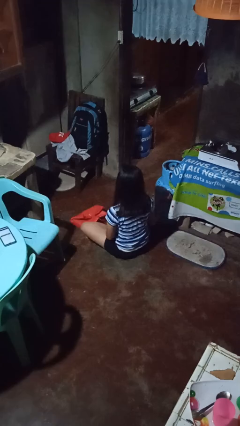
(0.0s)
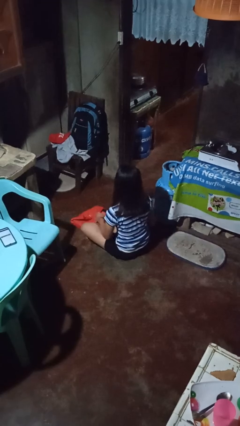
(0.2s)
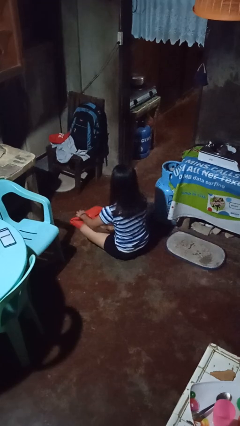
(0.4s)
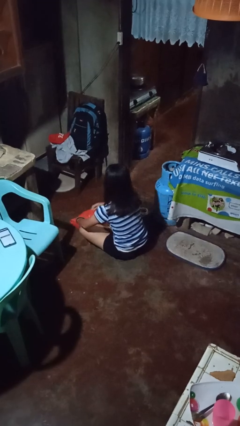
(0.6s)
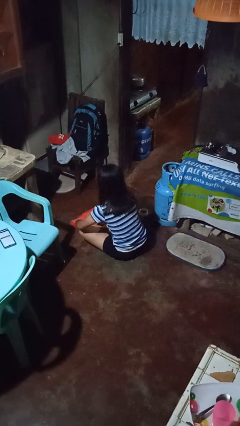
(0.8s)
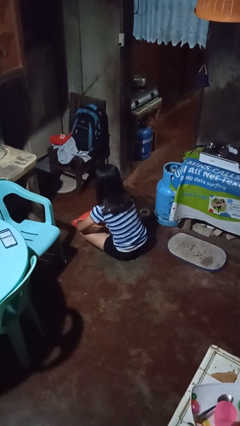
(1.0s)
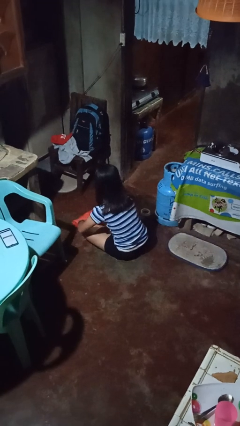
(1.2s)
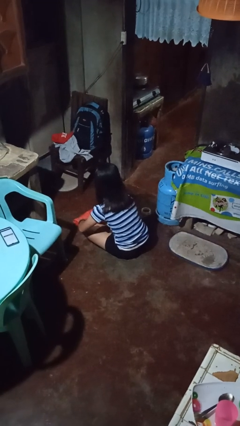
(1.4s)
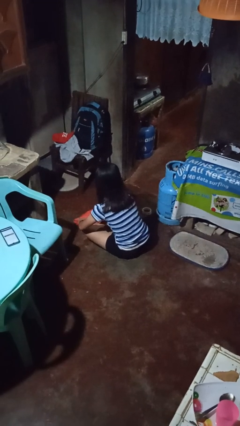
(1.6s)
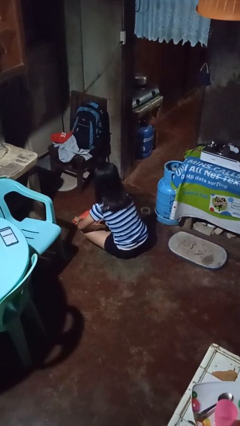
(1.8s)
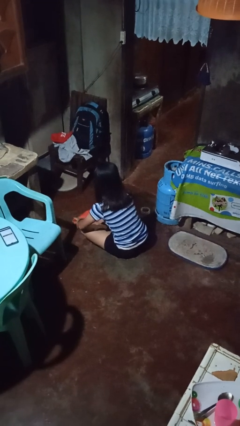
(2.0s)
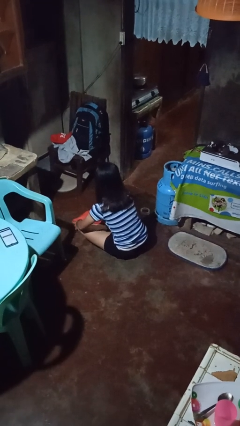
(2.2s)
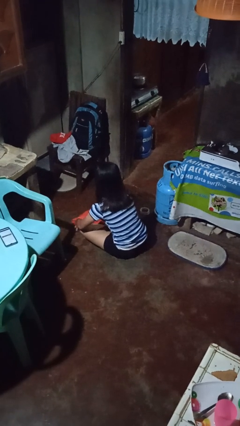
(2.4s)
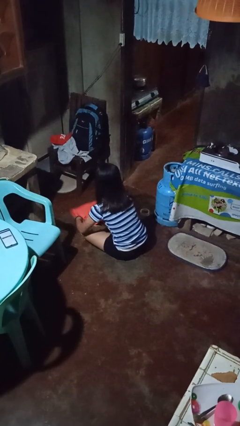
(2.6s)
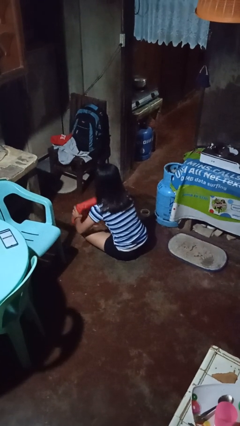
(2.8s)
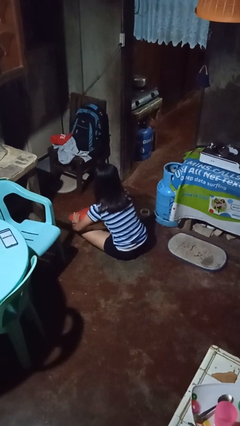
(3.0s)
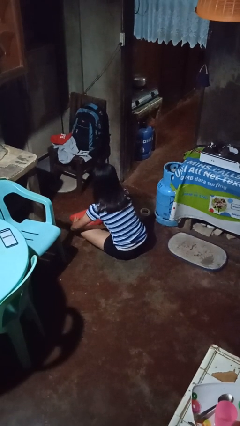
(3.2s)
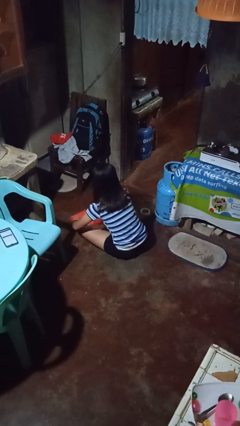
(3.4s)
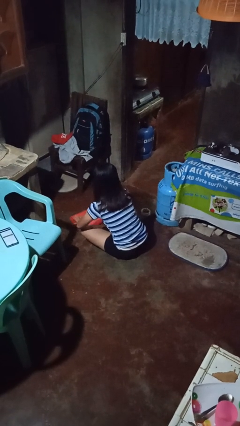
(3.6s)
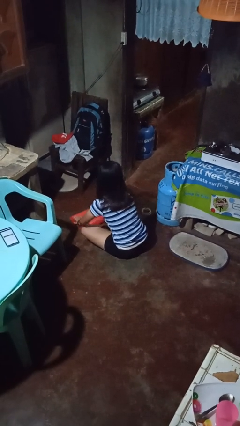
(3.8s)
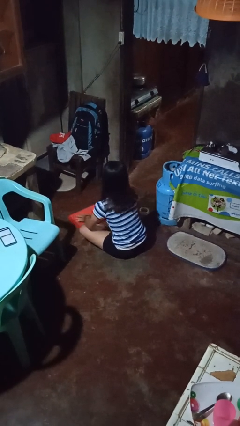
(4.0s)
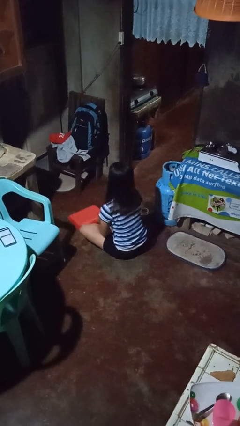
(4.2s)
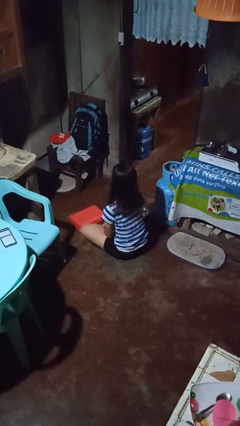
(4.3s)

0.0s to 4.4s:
person wraps box

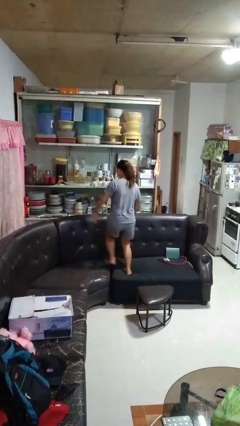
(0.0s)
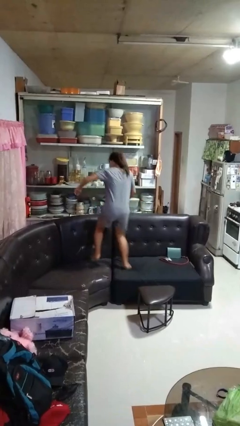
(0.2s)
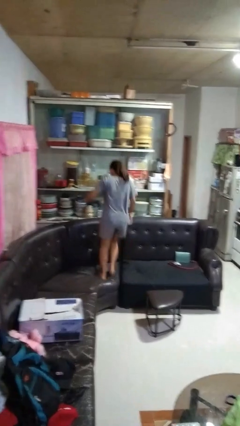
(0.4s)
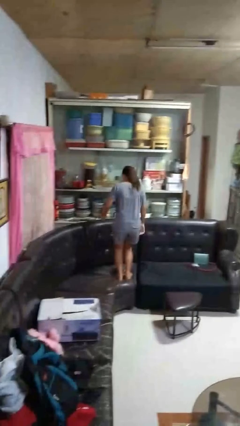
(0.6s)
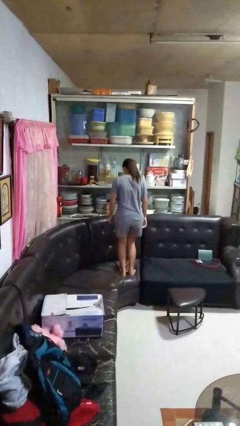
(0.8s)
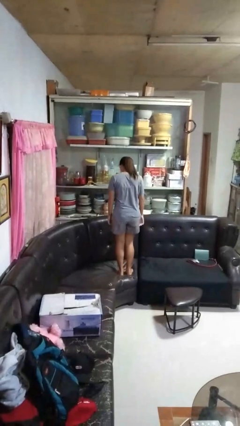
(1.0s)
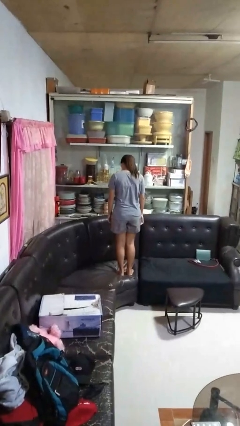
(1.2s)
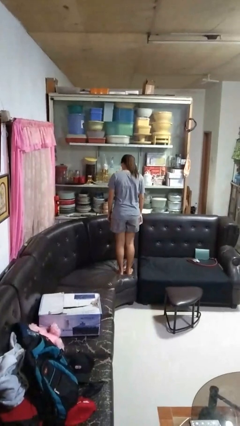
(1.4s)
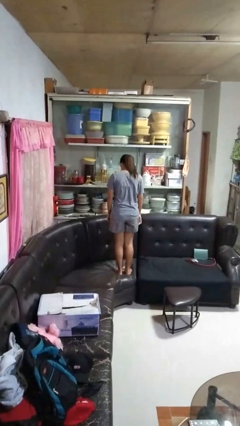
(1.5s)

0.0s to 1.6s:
person jumps on couch

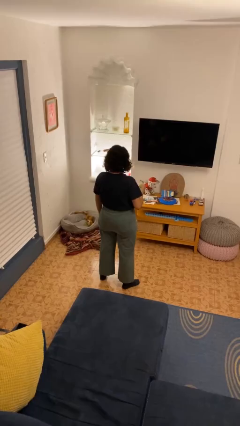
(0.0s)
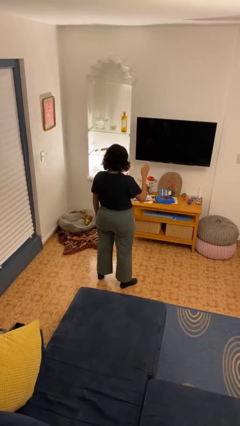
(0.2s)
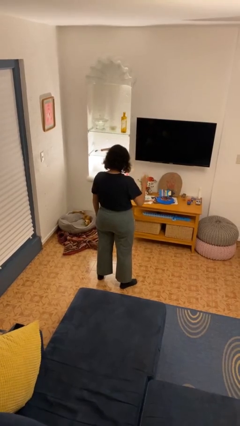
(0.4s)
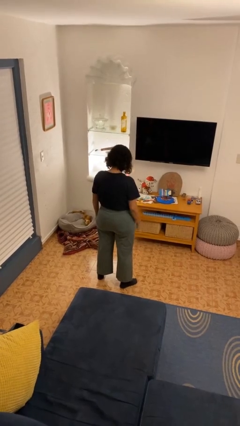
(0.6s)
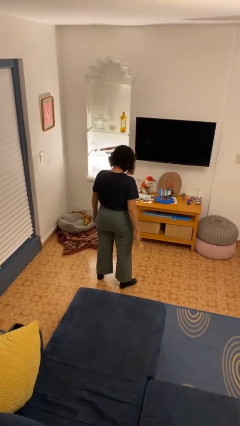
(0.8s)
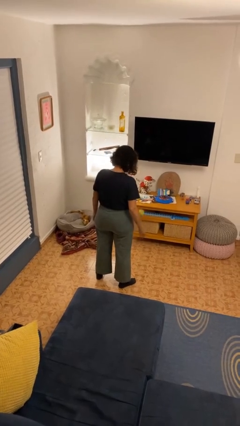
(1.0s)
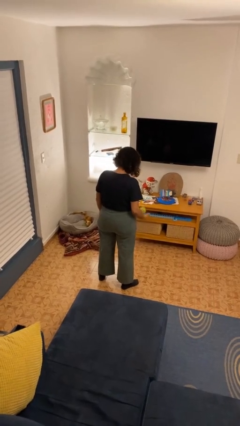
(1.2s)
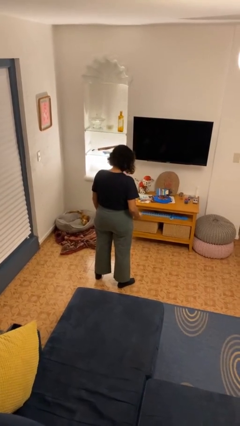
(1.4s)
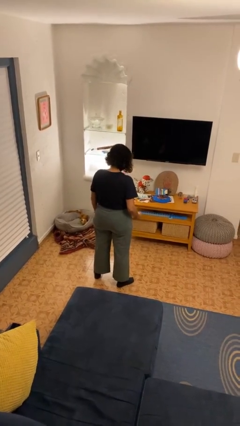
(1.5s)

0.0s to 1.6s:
person bounces ball on floor

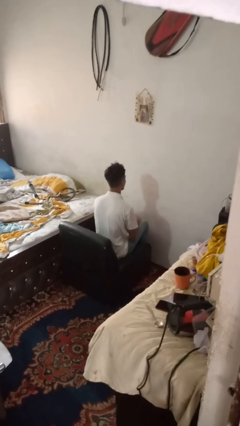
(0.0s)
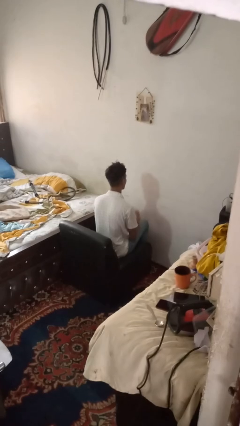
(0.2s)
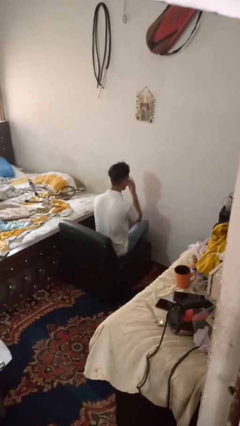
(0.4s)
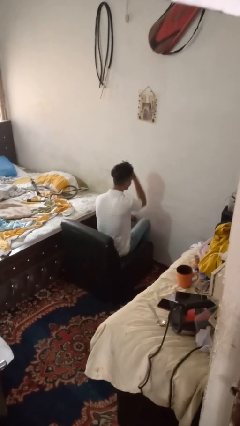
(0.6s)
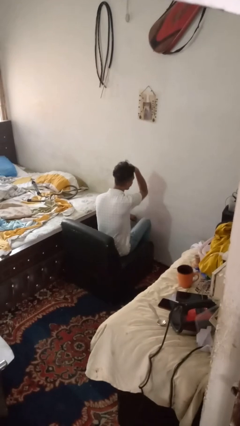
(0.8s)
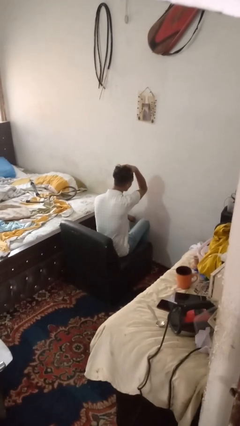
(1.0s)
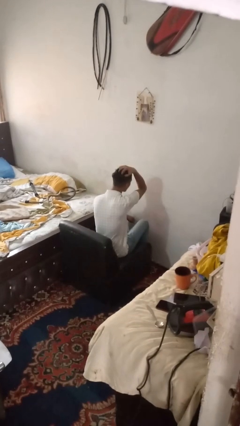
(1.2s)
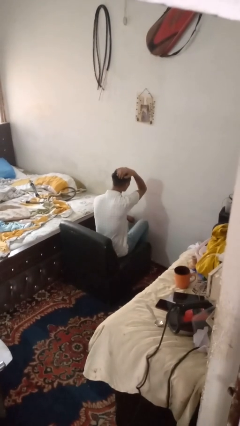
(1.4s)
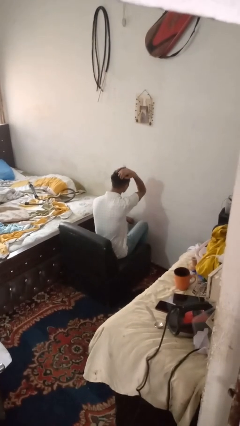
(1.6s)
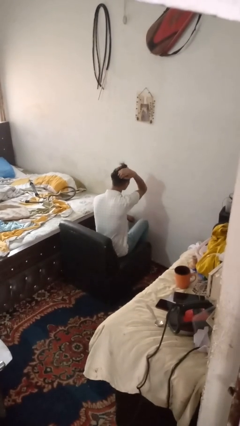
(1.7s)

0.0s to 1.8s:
person strokes hair

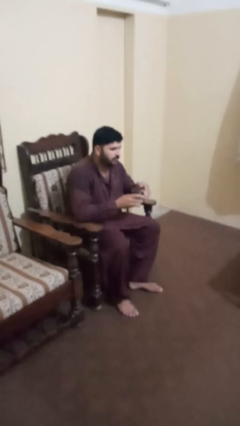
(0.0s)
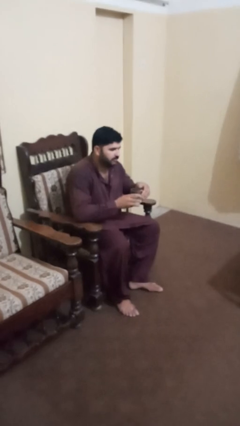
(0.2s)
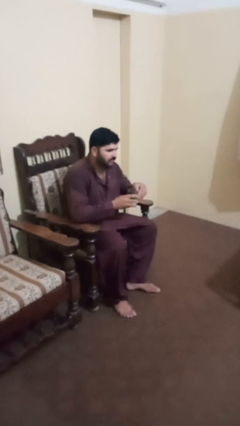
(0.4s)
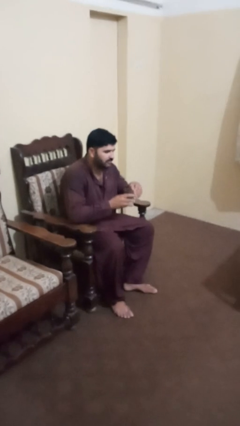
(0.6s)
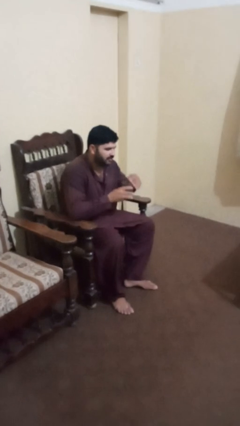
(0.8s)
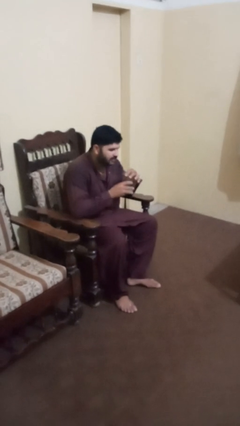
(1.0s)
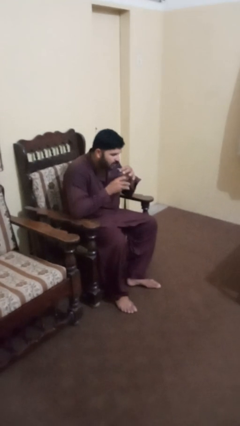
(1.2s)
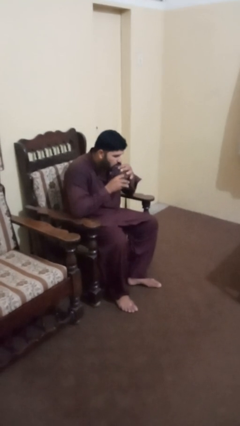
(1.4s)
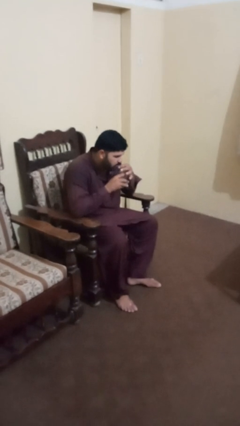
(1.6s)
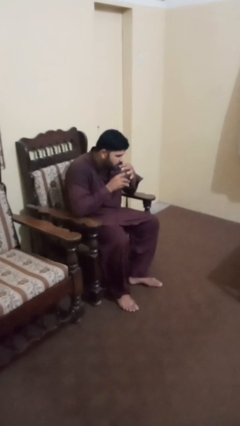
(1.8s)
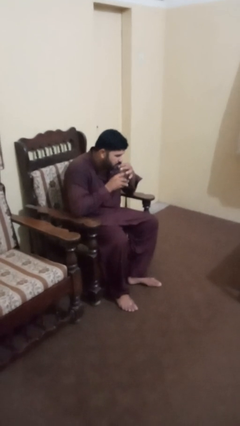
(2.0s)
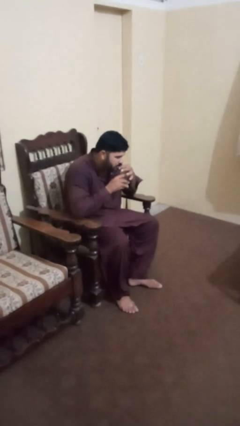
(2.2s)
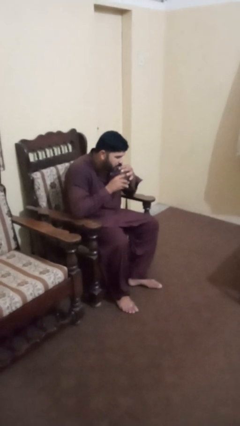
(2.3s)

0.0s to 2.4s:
person drinks from straw

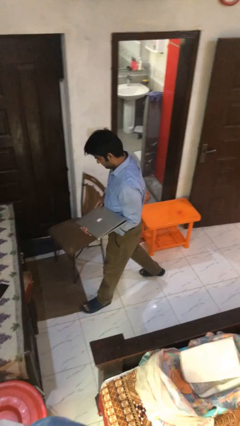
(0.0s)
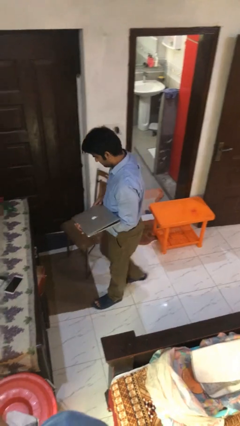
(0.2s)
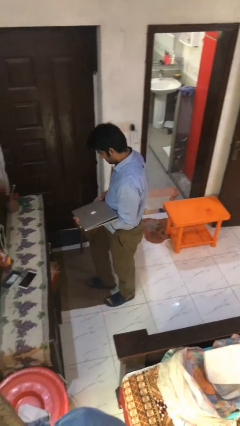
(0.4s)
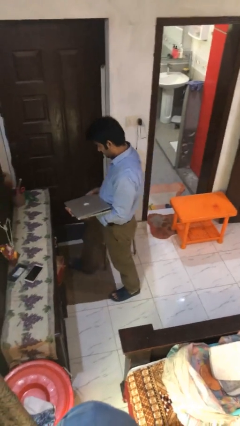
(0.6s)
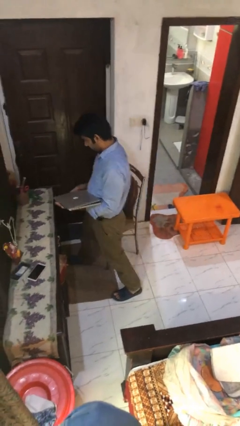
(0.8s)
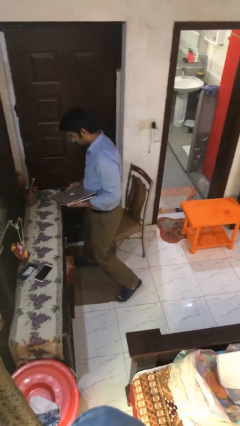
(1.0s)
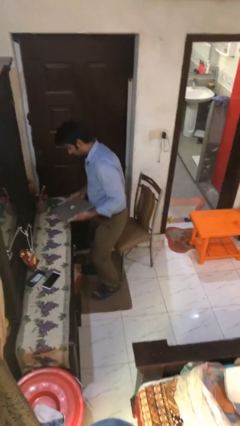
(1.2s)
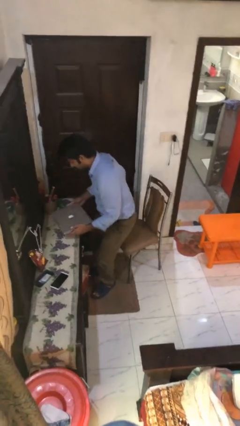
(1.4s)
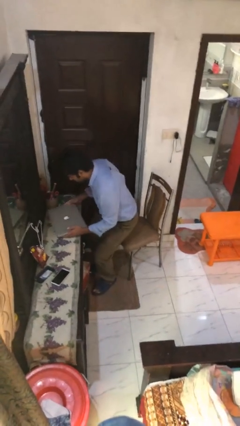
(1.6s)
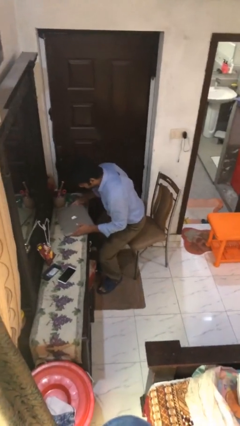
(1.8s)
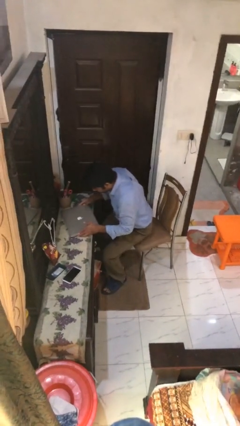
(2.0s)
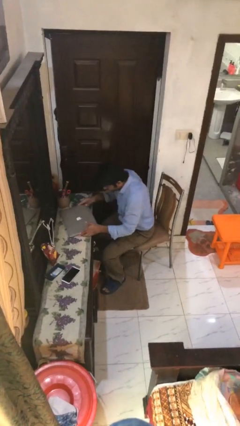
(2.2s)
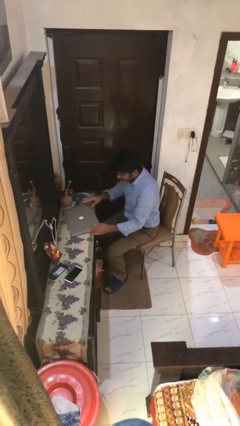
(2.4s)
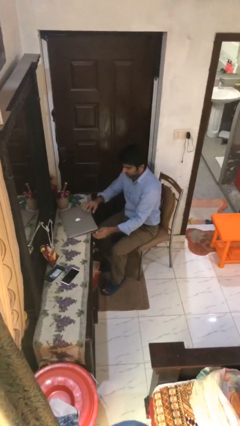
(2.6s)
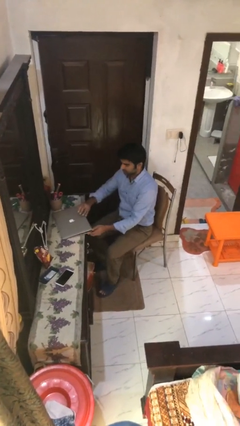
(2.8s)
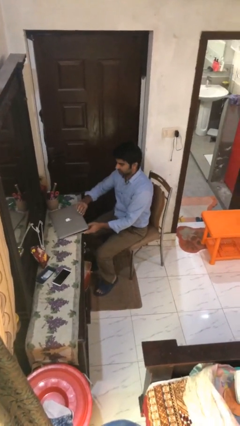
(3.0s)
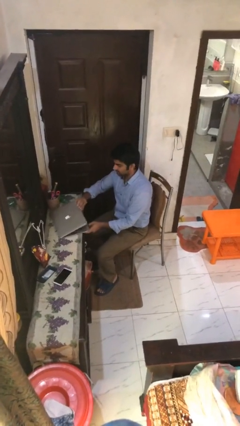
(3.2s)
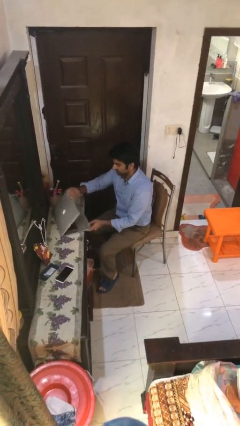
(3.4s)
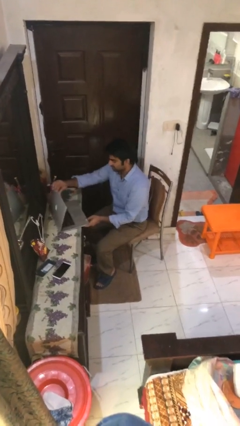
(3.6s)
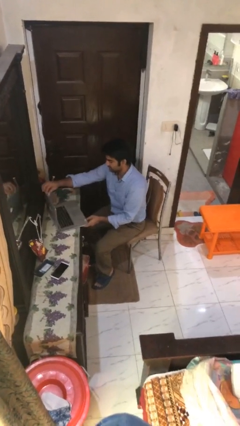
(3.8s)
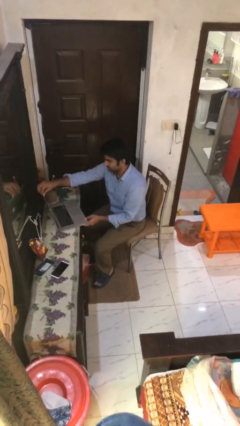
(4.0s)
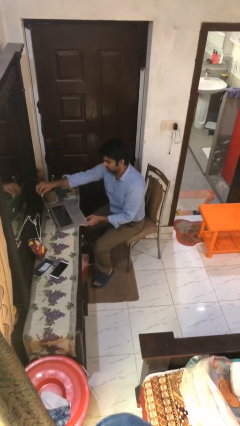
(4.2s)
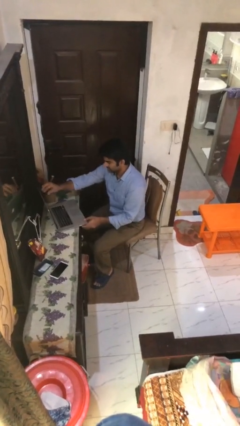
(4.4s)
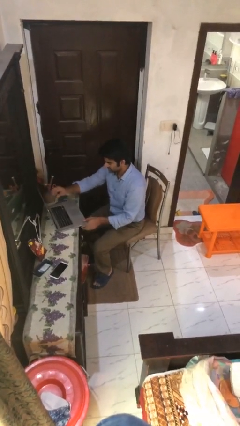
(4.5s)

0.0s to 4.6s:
person sits down

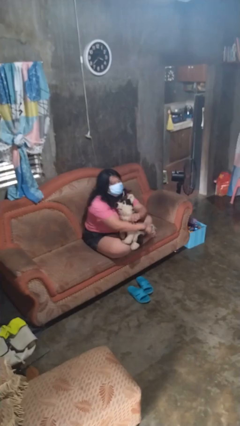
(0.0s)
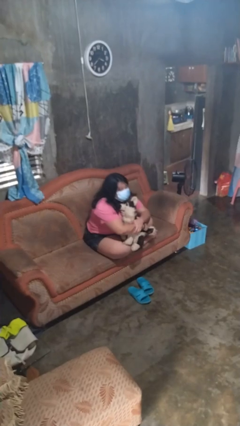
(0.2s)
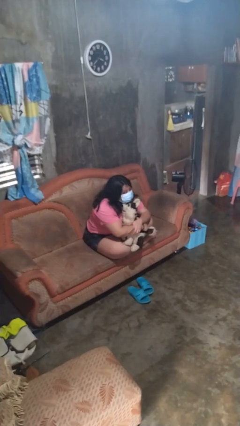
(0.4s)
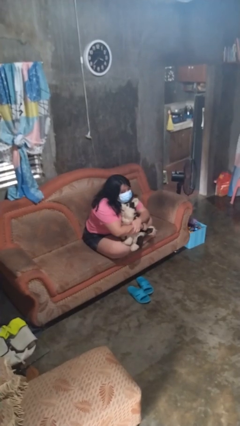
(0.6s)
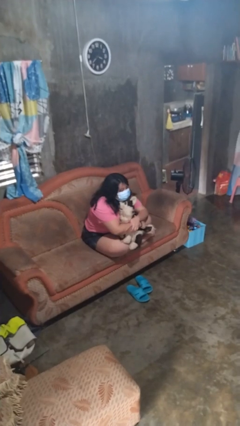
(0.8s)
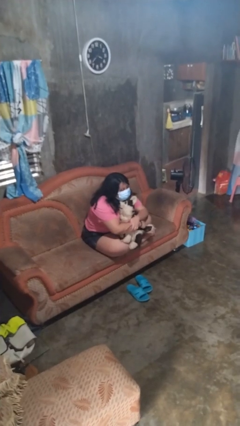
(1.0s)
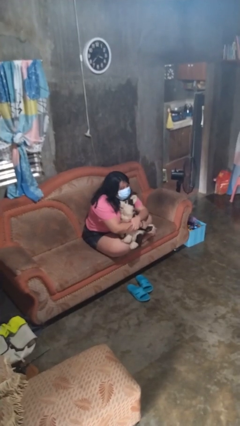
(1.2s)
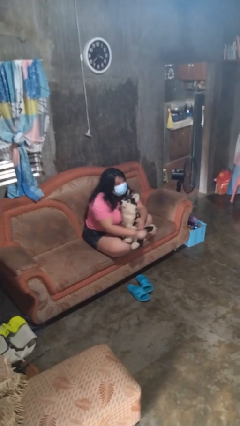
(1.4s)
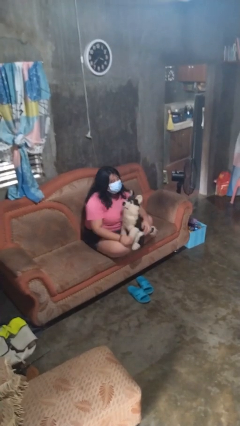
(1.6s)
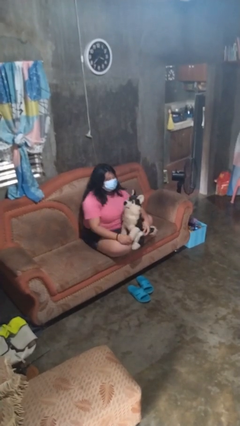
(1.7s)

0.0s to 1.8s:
person hugs stuffed animal
